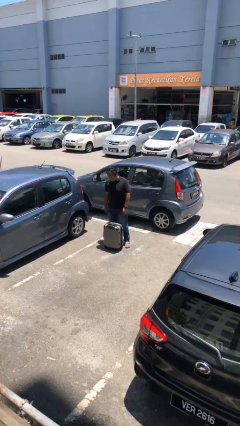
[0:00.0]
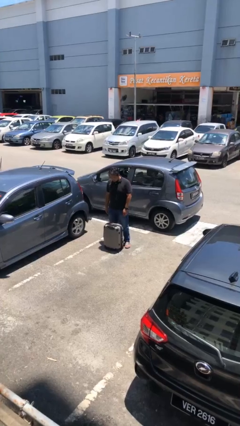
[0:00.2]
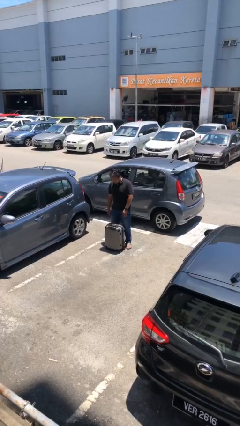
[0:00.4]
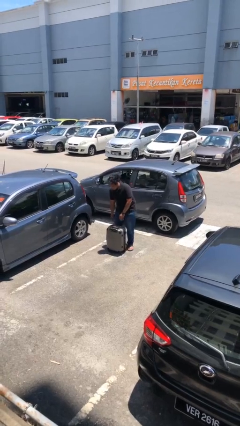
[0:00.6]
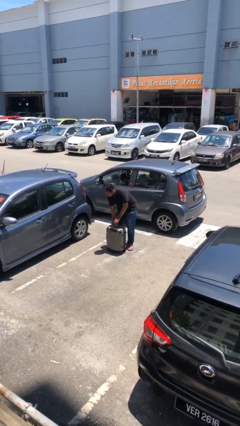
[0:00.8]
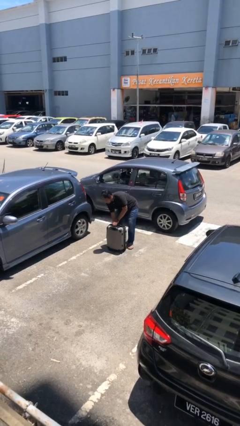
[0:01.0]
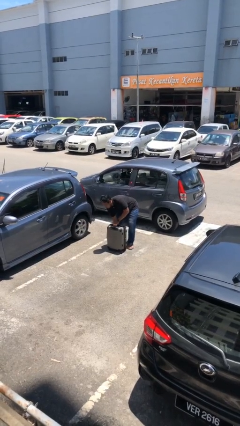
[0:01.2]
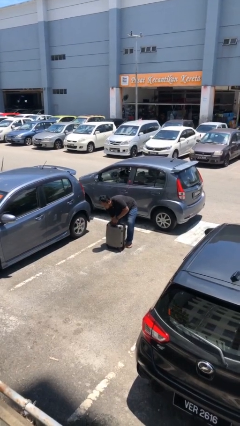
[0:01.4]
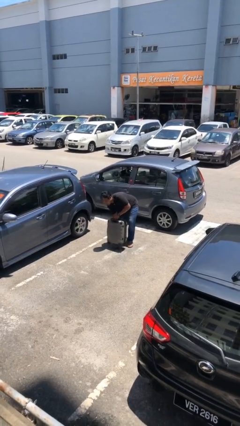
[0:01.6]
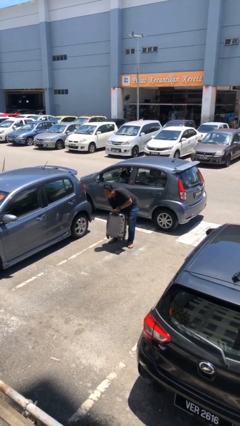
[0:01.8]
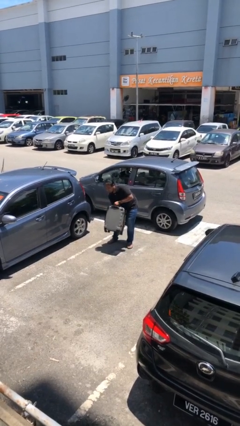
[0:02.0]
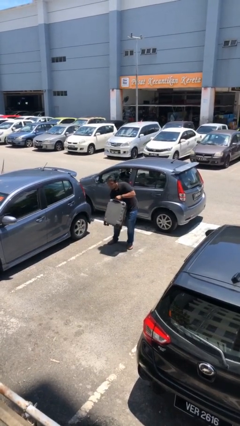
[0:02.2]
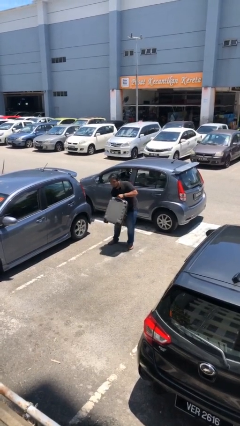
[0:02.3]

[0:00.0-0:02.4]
person picks up object from floor

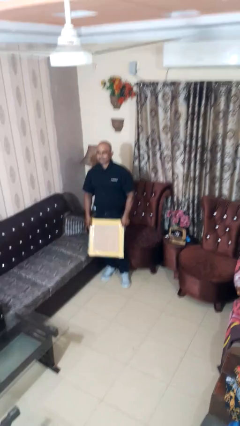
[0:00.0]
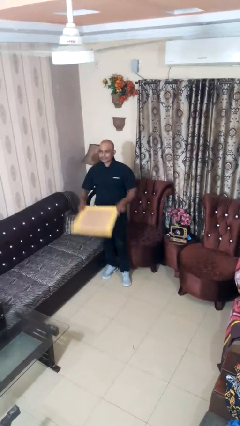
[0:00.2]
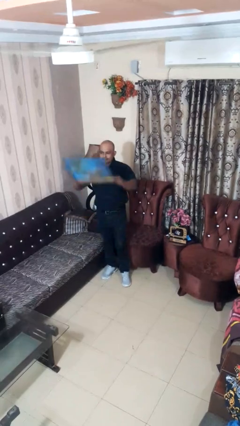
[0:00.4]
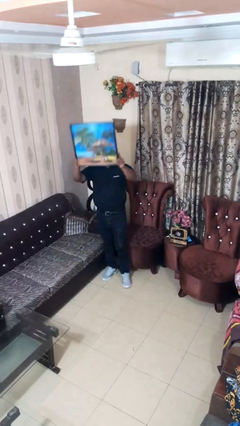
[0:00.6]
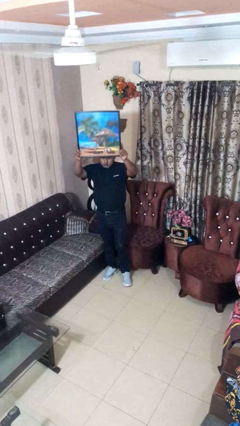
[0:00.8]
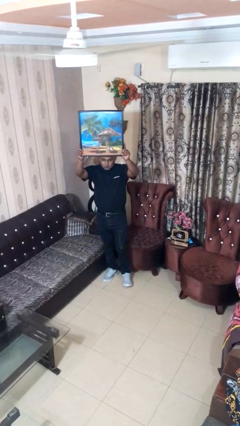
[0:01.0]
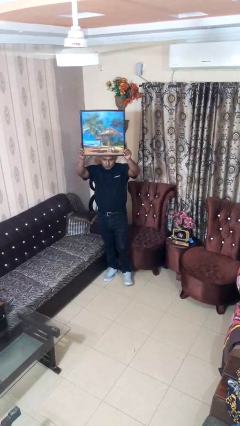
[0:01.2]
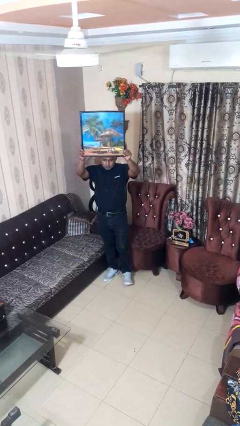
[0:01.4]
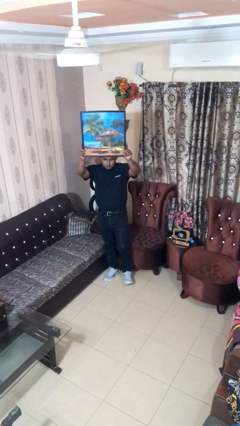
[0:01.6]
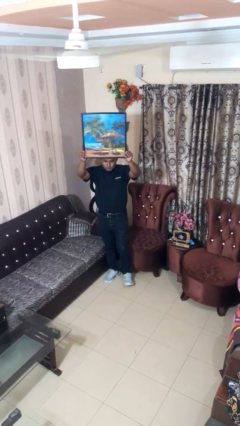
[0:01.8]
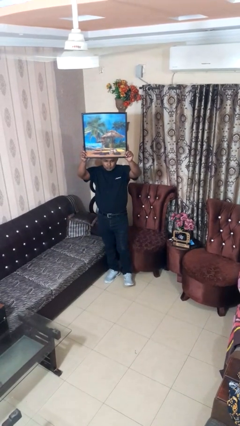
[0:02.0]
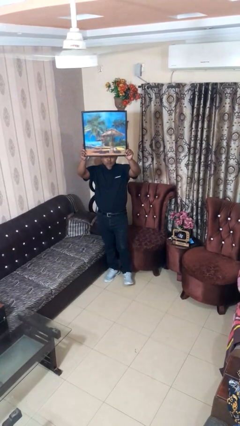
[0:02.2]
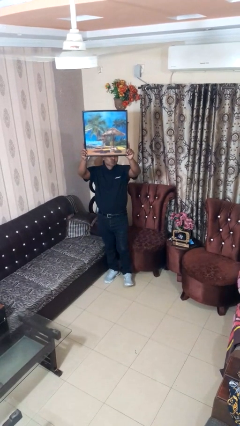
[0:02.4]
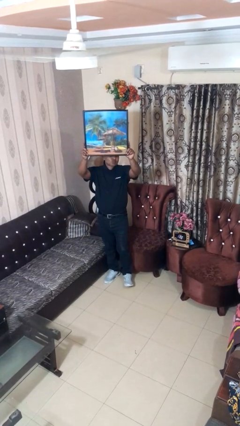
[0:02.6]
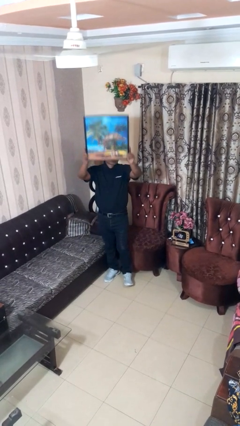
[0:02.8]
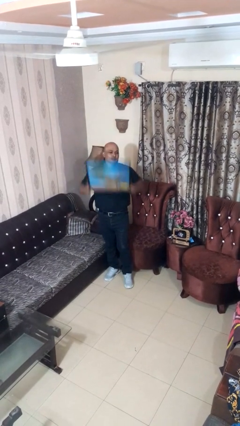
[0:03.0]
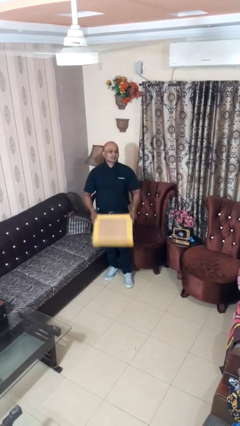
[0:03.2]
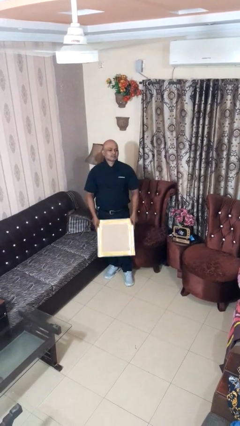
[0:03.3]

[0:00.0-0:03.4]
person holds object above head

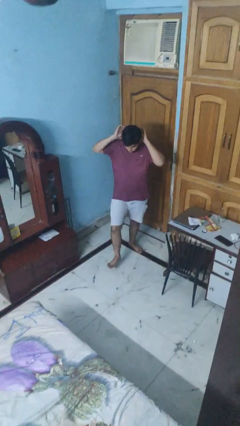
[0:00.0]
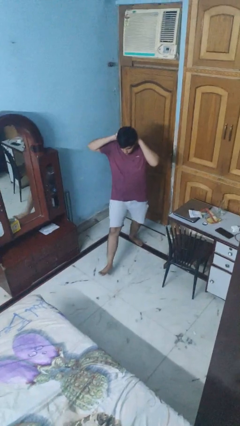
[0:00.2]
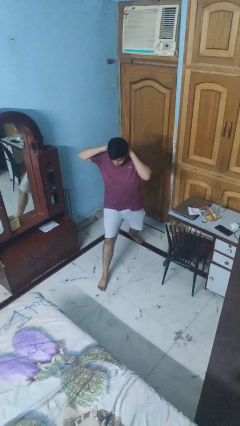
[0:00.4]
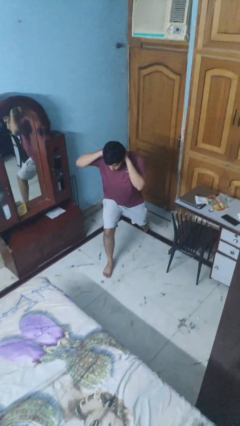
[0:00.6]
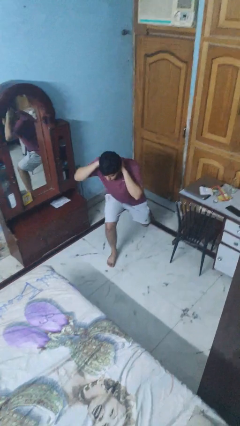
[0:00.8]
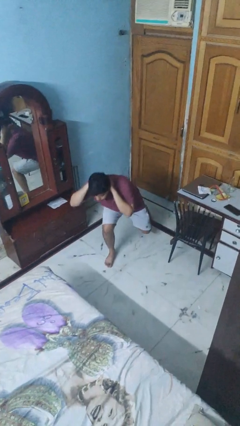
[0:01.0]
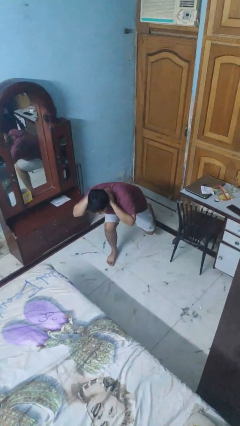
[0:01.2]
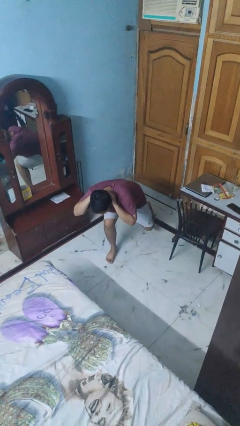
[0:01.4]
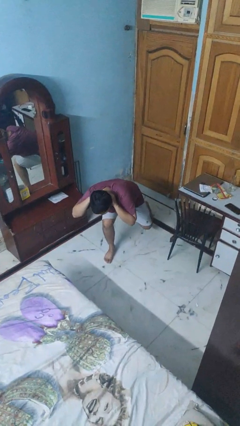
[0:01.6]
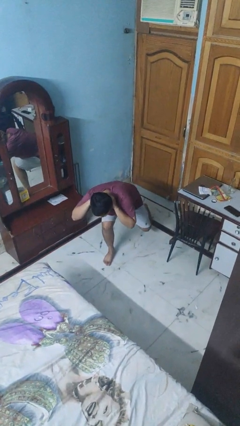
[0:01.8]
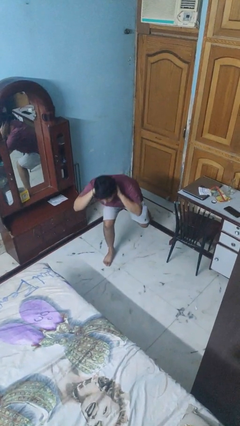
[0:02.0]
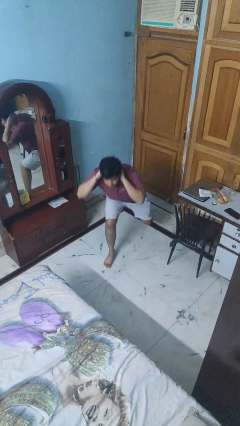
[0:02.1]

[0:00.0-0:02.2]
person exercises with lunges

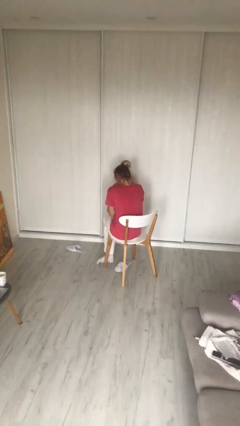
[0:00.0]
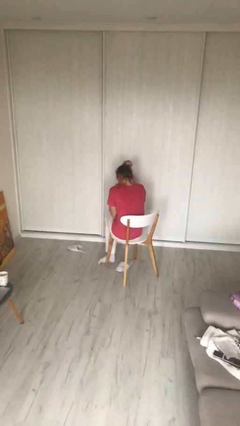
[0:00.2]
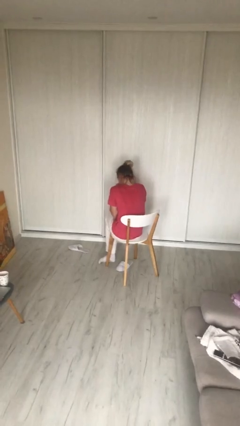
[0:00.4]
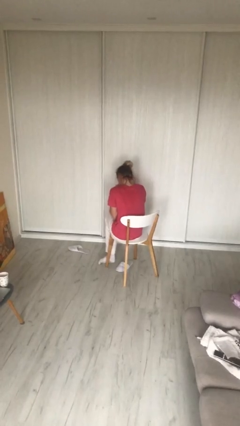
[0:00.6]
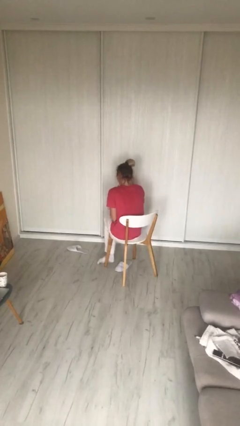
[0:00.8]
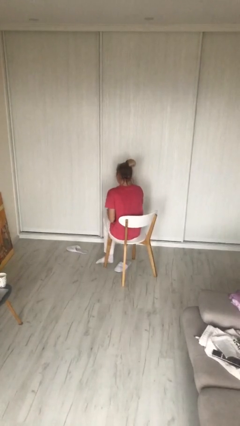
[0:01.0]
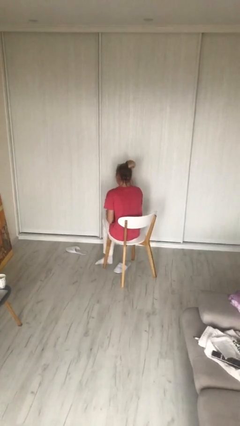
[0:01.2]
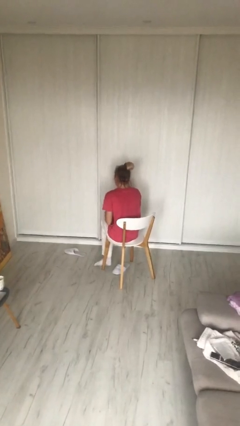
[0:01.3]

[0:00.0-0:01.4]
person blows nose

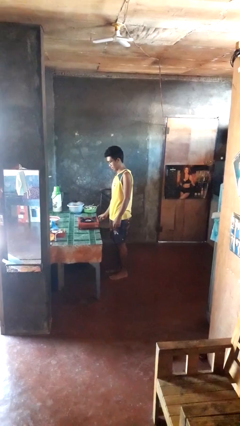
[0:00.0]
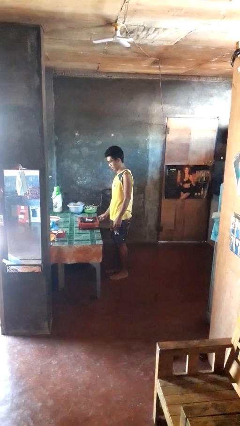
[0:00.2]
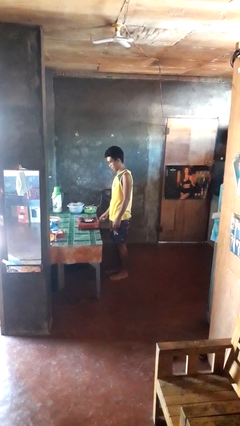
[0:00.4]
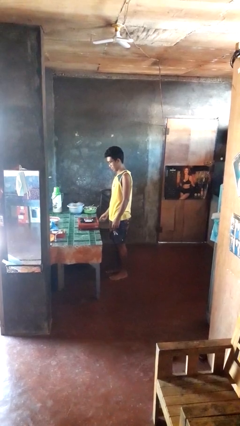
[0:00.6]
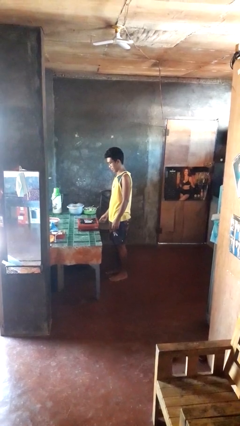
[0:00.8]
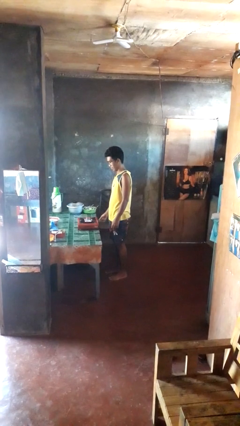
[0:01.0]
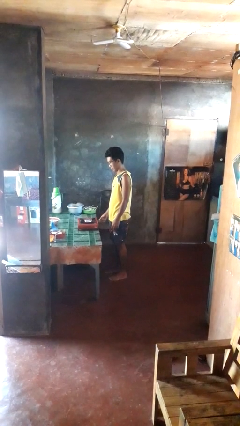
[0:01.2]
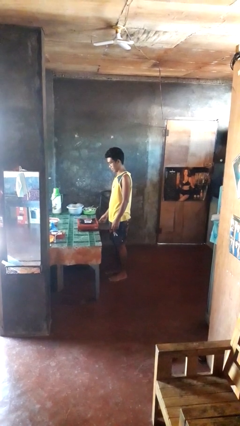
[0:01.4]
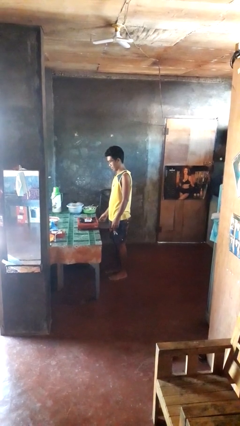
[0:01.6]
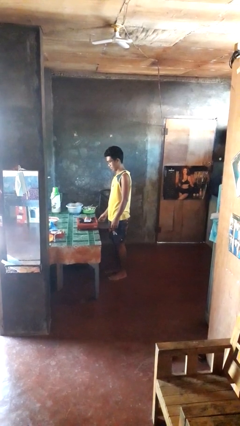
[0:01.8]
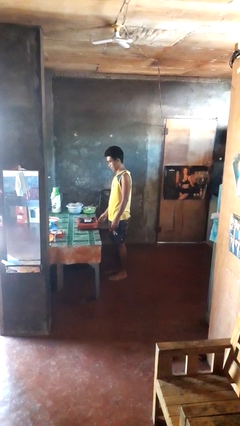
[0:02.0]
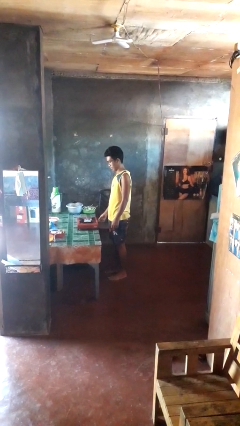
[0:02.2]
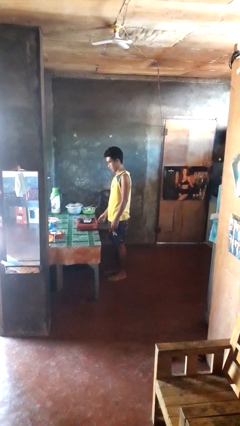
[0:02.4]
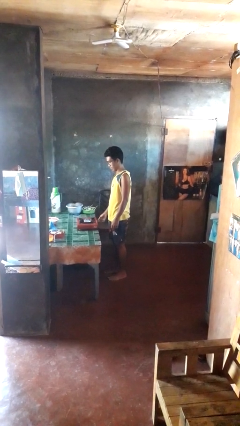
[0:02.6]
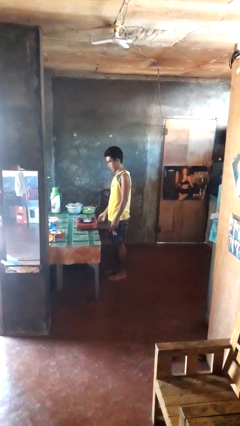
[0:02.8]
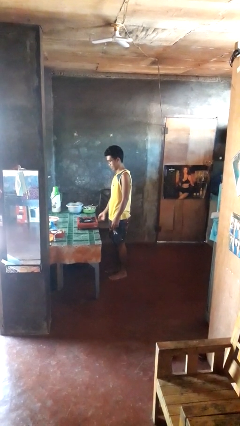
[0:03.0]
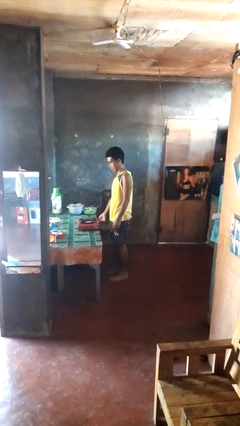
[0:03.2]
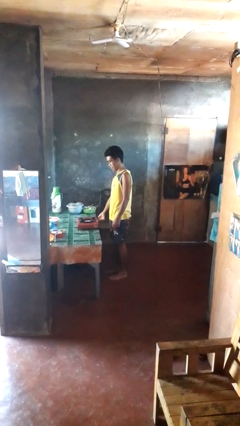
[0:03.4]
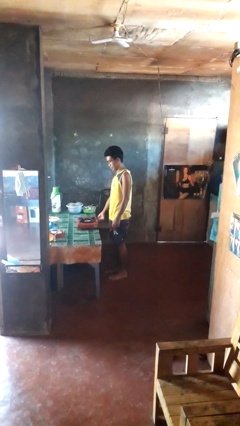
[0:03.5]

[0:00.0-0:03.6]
person turns on stovetop

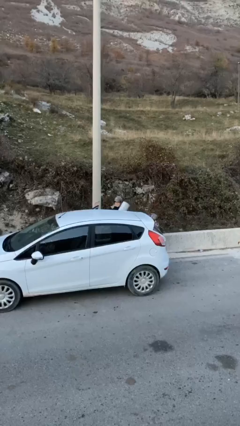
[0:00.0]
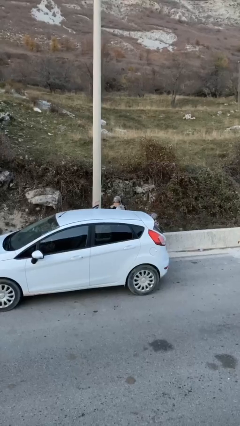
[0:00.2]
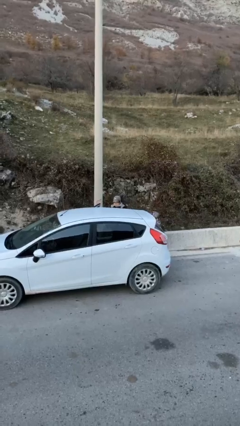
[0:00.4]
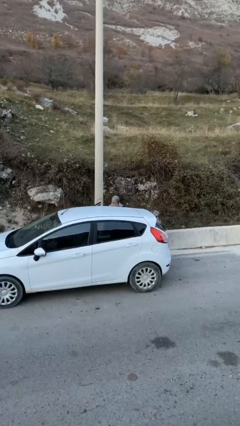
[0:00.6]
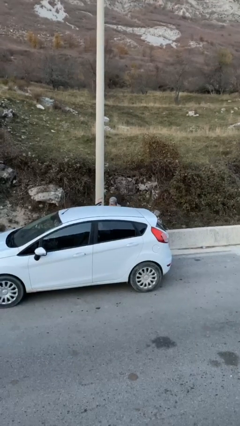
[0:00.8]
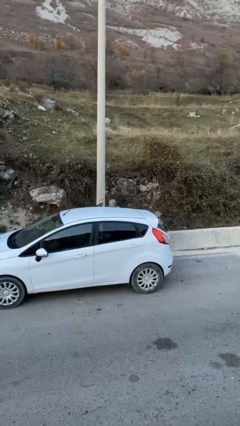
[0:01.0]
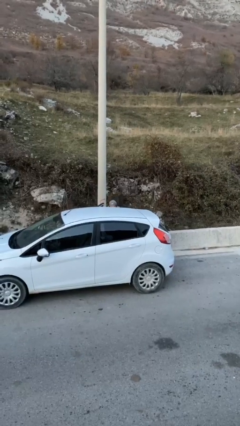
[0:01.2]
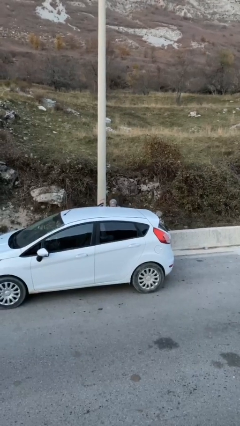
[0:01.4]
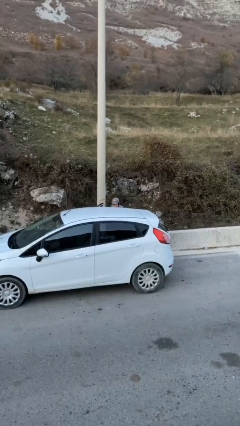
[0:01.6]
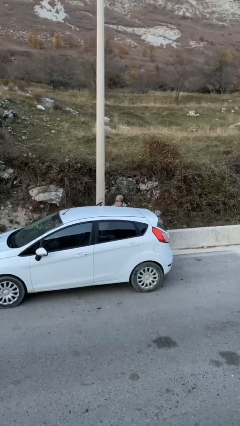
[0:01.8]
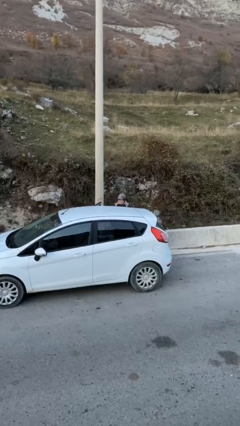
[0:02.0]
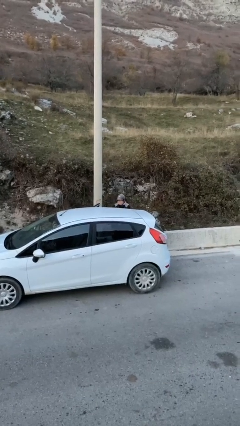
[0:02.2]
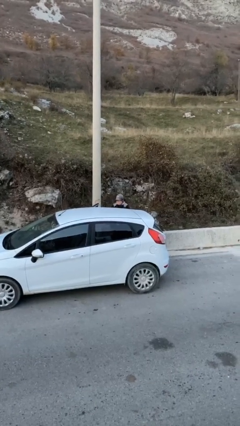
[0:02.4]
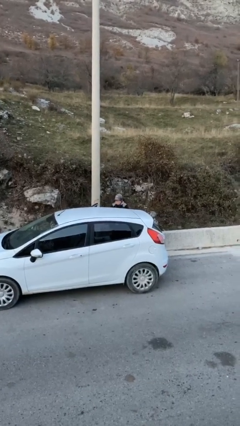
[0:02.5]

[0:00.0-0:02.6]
person loads car

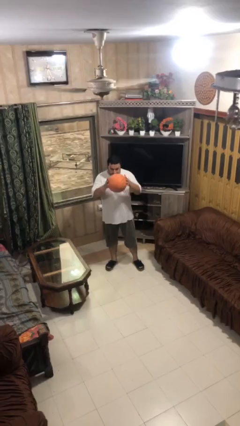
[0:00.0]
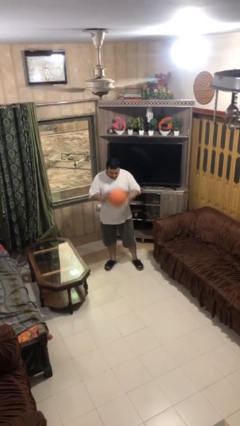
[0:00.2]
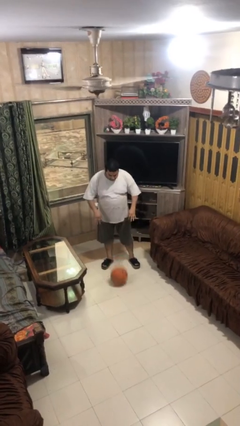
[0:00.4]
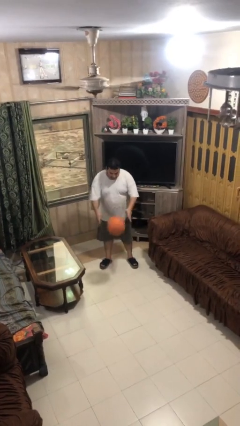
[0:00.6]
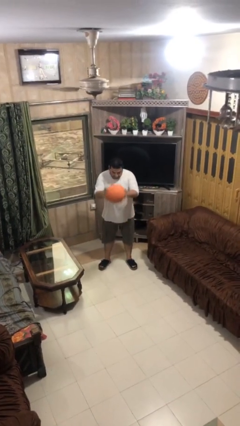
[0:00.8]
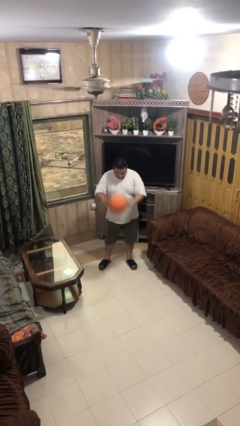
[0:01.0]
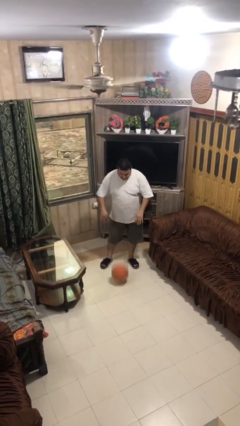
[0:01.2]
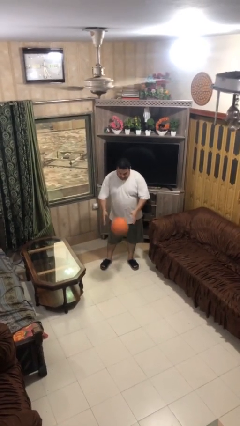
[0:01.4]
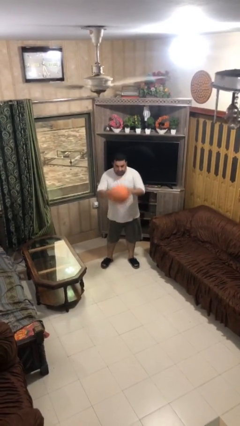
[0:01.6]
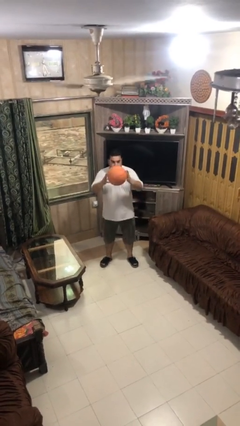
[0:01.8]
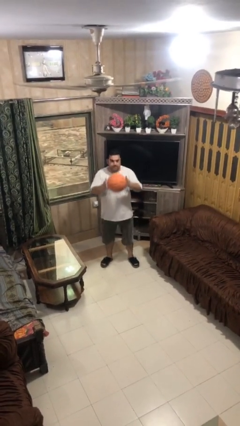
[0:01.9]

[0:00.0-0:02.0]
person bounces ball on floor
